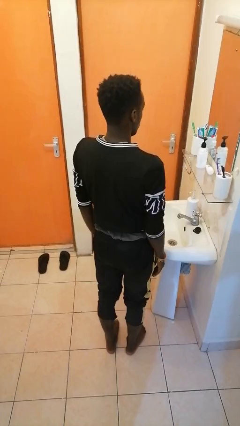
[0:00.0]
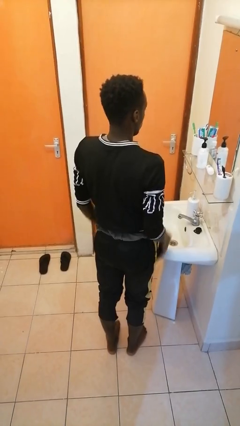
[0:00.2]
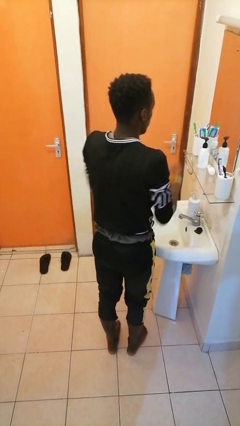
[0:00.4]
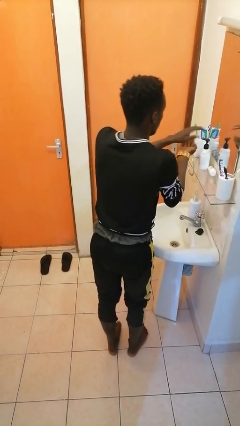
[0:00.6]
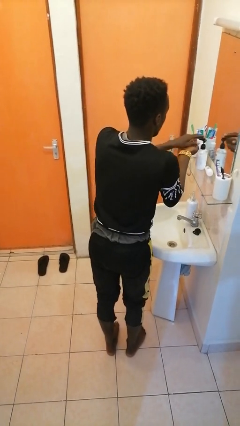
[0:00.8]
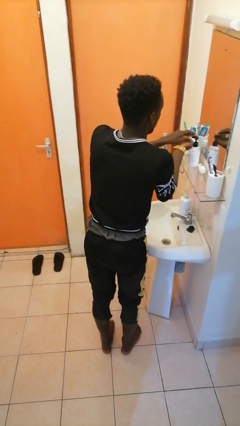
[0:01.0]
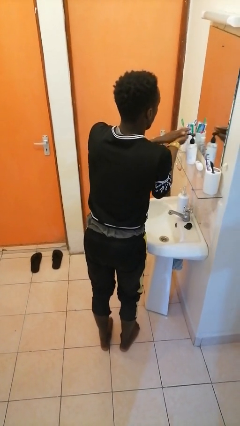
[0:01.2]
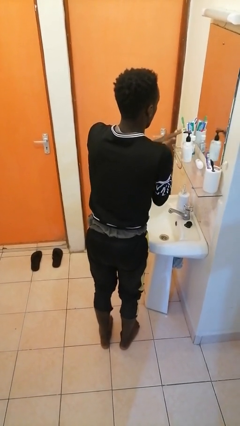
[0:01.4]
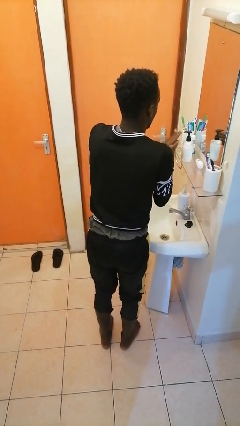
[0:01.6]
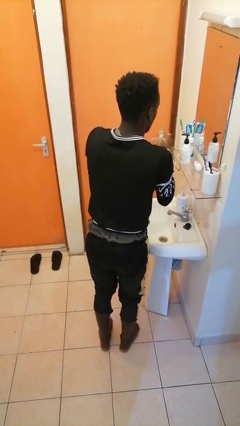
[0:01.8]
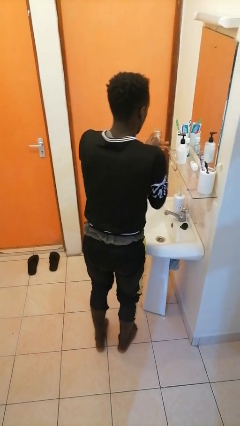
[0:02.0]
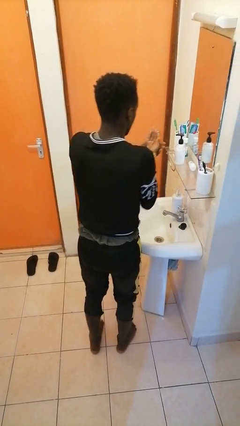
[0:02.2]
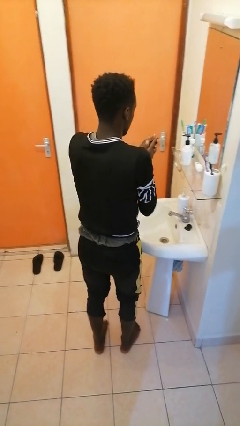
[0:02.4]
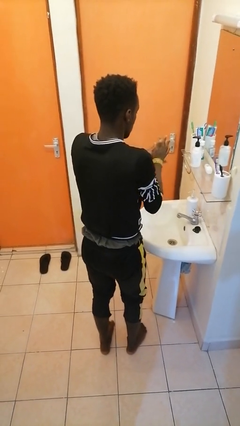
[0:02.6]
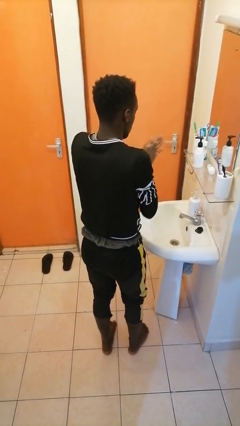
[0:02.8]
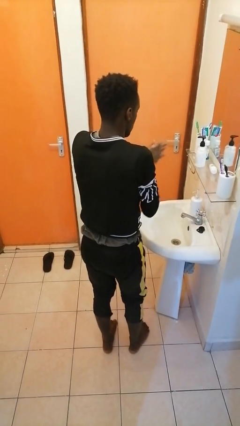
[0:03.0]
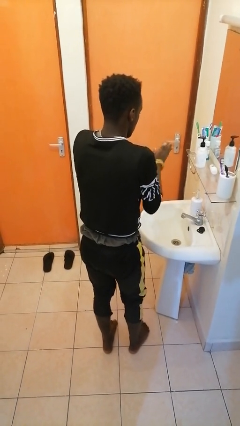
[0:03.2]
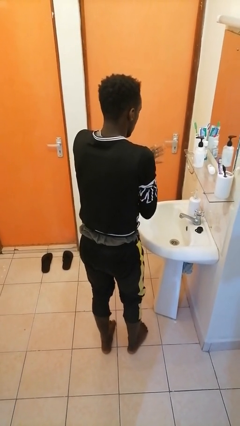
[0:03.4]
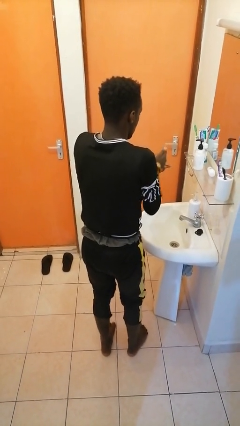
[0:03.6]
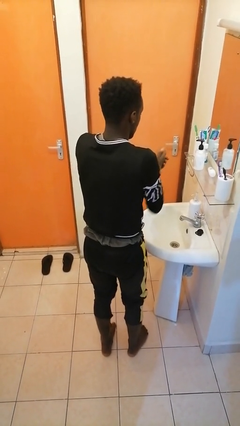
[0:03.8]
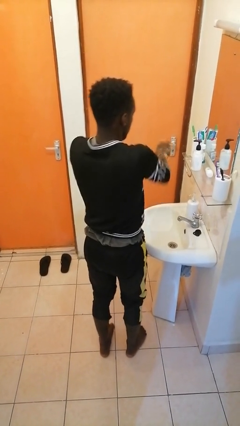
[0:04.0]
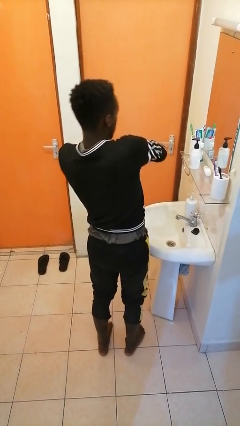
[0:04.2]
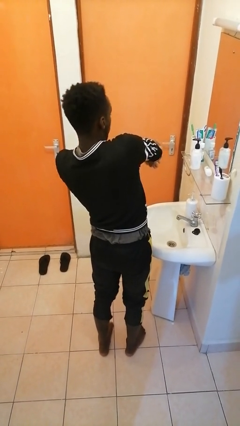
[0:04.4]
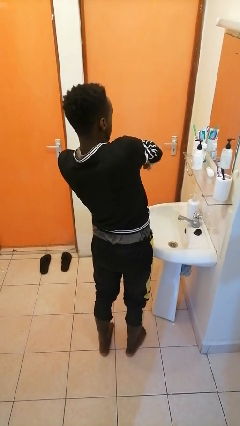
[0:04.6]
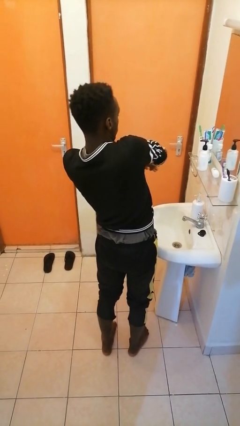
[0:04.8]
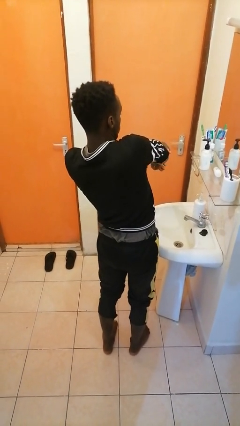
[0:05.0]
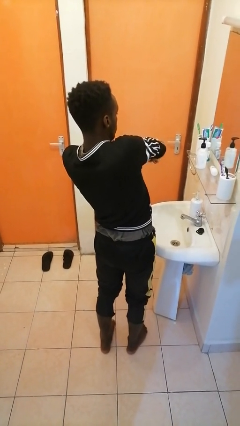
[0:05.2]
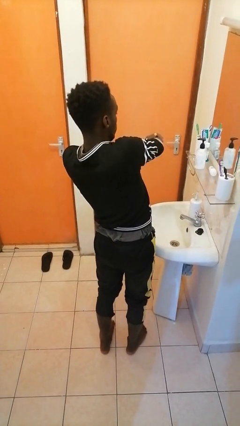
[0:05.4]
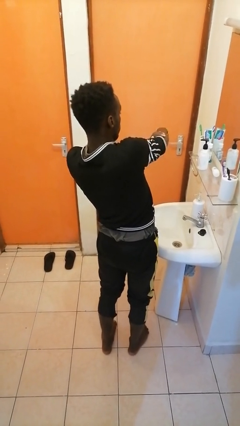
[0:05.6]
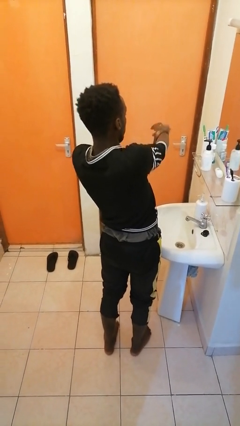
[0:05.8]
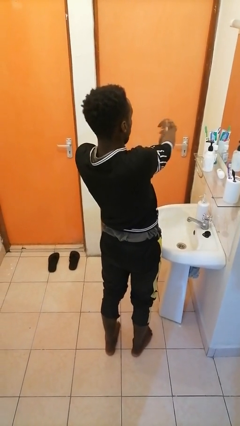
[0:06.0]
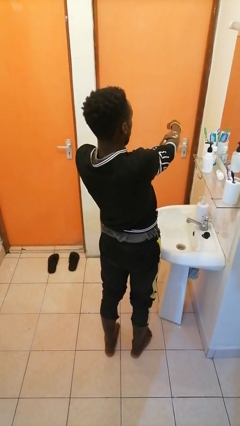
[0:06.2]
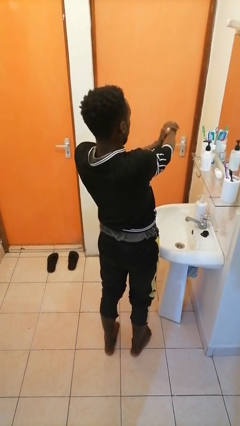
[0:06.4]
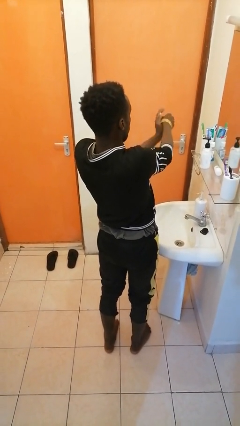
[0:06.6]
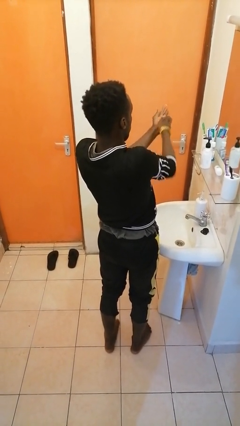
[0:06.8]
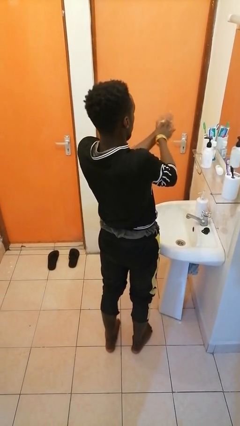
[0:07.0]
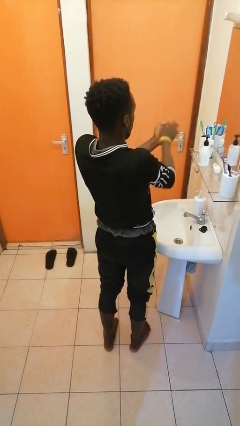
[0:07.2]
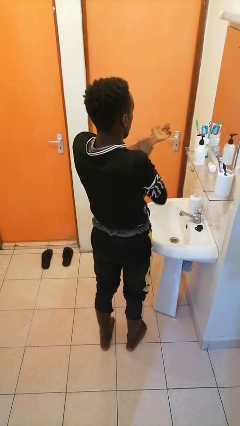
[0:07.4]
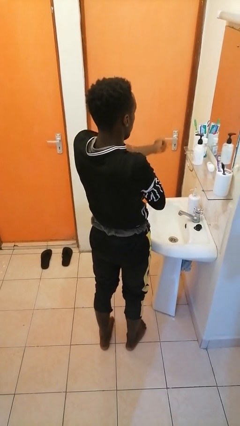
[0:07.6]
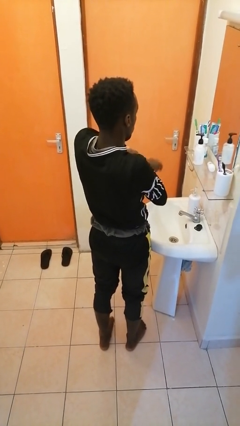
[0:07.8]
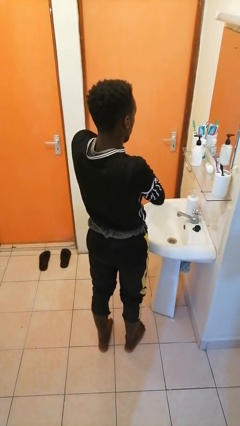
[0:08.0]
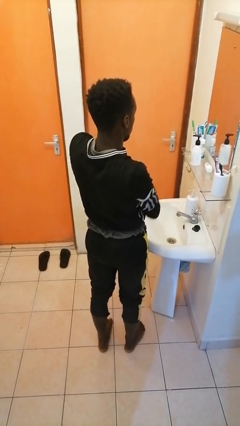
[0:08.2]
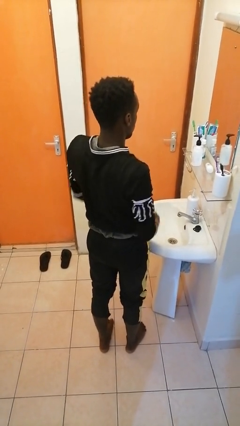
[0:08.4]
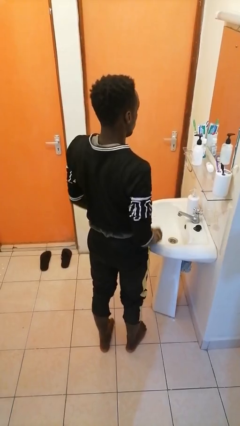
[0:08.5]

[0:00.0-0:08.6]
person applies facial moisturizer

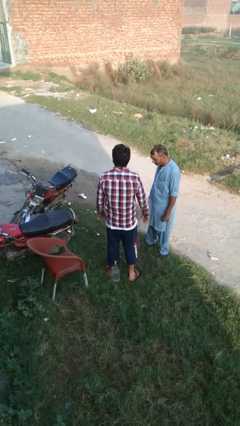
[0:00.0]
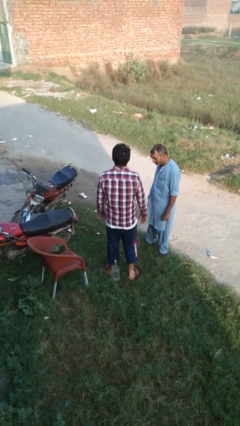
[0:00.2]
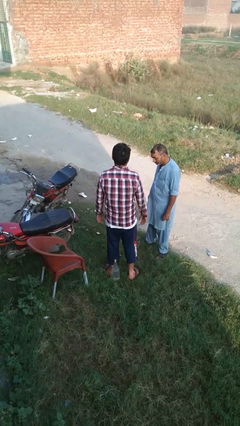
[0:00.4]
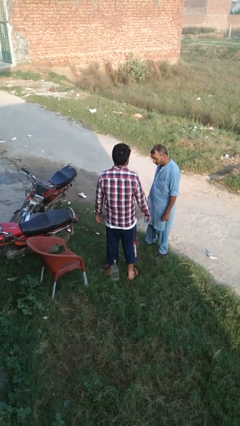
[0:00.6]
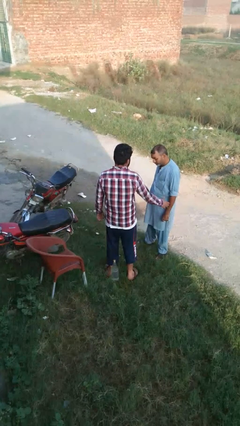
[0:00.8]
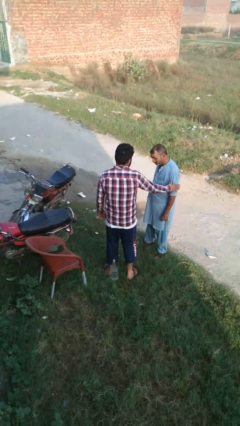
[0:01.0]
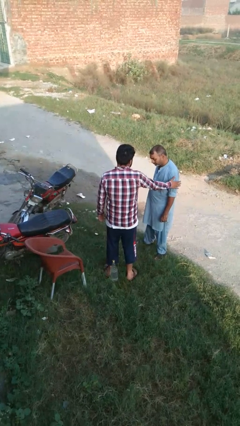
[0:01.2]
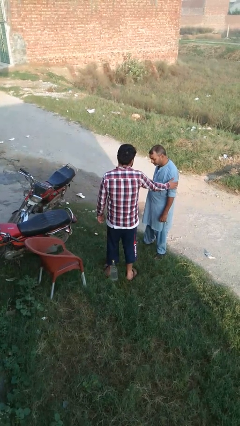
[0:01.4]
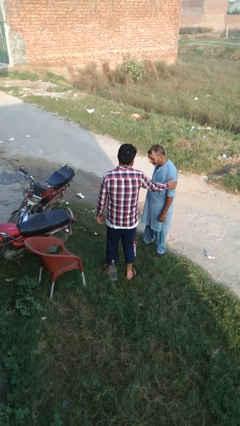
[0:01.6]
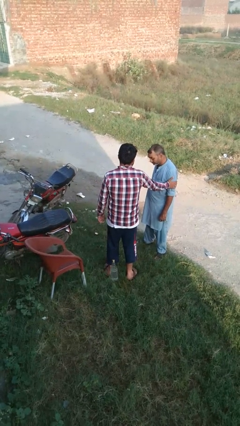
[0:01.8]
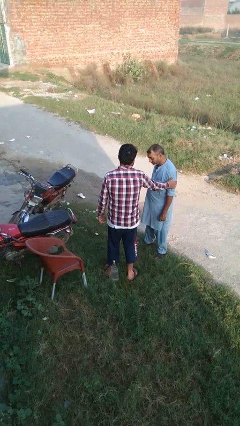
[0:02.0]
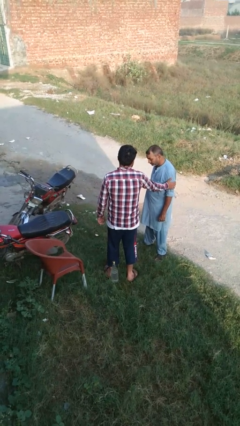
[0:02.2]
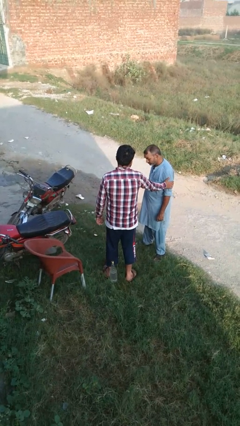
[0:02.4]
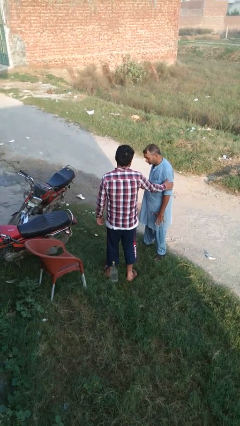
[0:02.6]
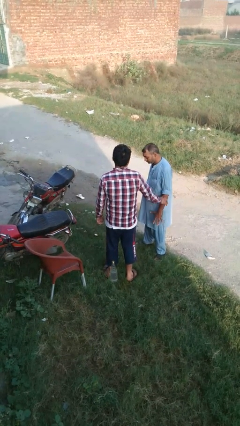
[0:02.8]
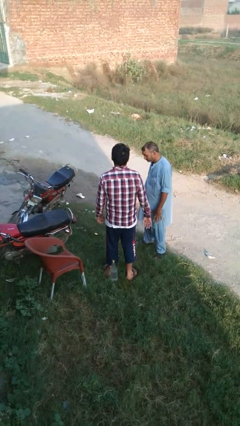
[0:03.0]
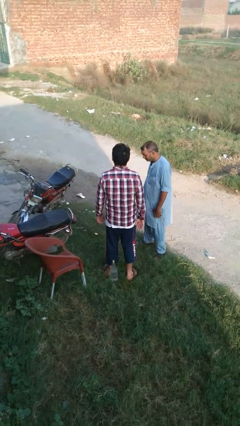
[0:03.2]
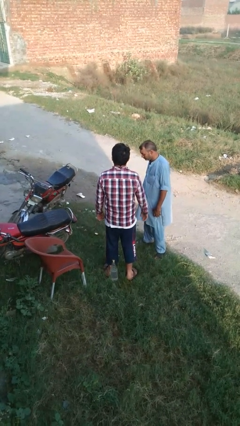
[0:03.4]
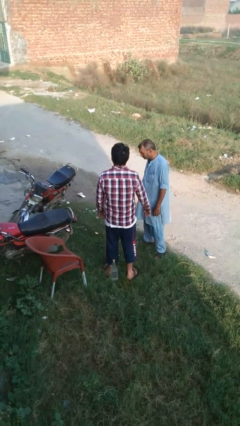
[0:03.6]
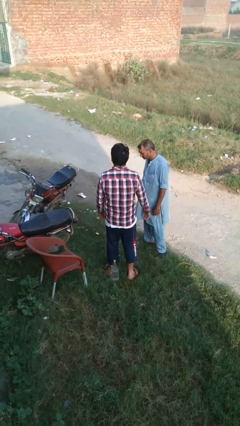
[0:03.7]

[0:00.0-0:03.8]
person grabs person by bicep

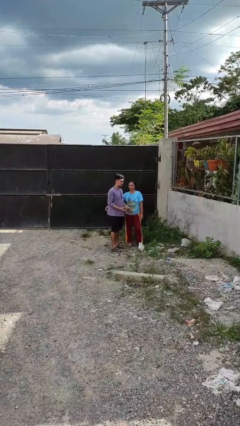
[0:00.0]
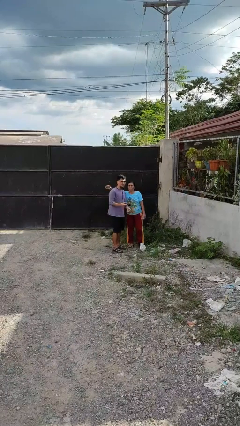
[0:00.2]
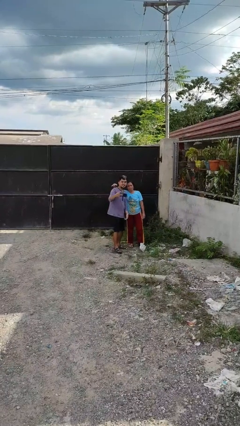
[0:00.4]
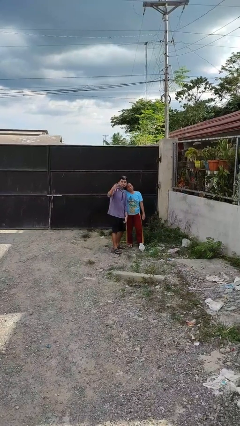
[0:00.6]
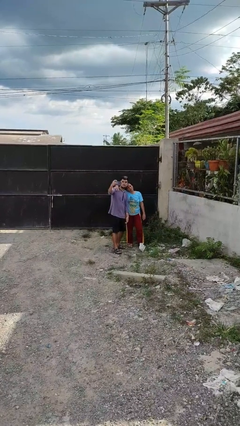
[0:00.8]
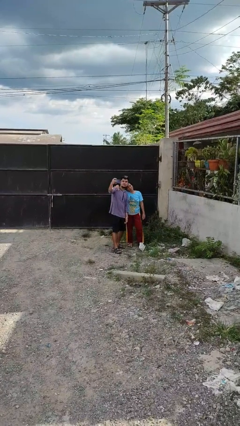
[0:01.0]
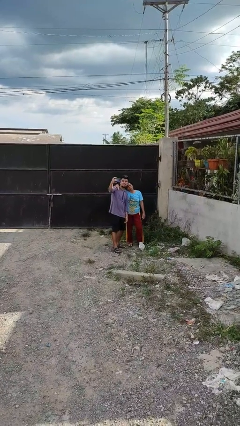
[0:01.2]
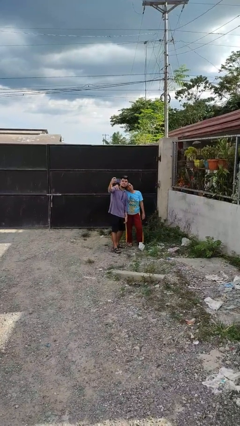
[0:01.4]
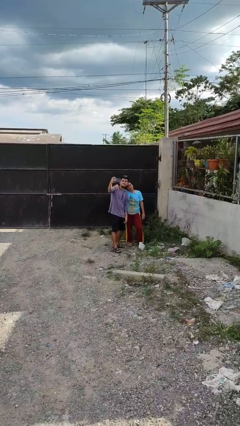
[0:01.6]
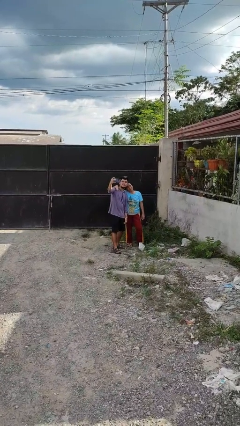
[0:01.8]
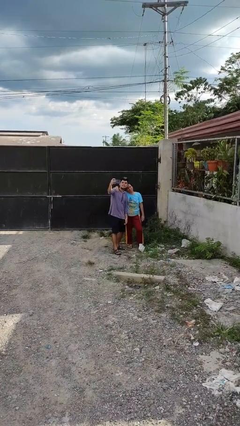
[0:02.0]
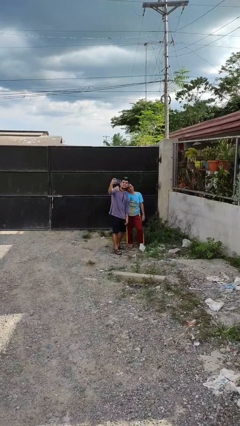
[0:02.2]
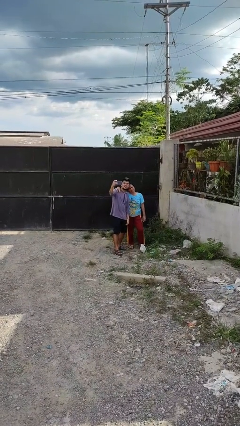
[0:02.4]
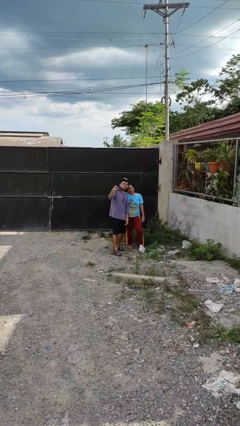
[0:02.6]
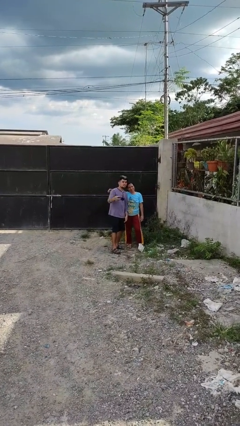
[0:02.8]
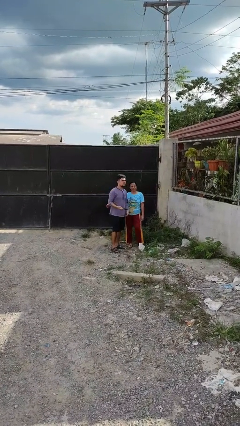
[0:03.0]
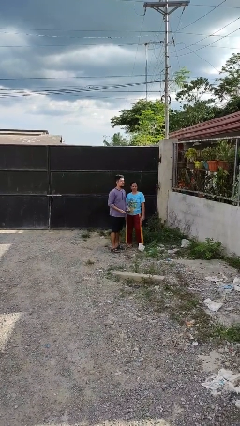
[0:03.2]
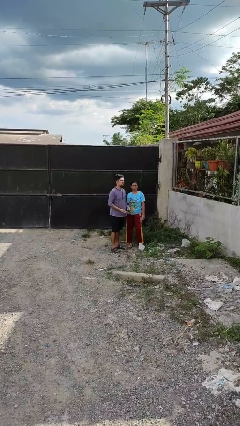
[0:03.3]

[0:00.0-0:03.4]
person takes selfie with person

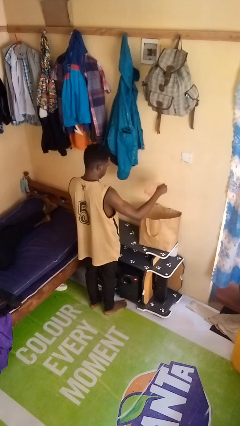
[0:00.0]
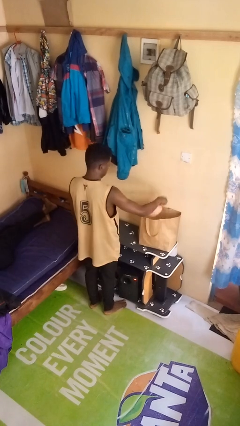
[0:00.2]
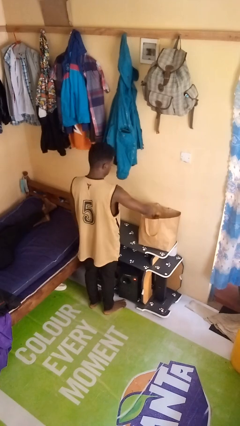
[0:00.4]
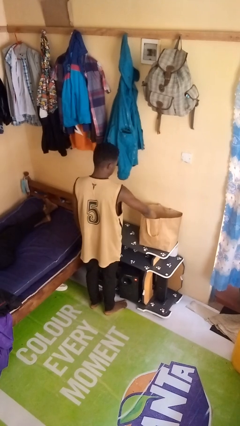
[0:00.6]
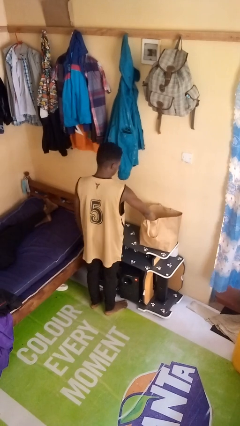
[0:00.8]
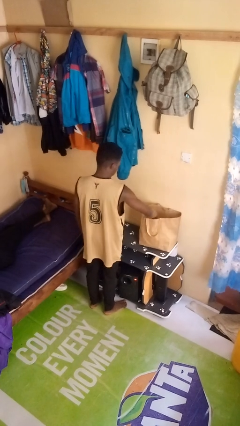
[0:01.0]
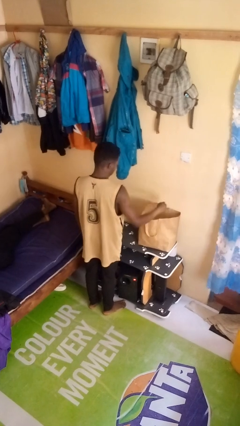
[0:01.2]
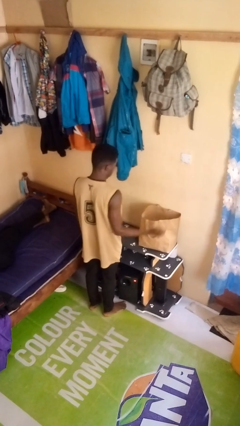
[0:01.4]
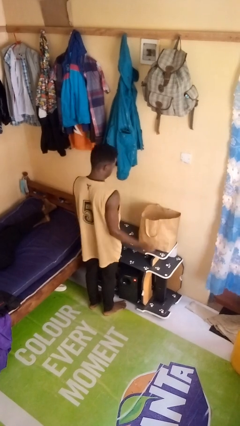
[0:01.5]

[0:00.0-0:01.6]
person puts object into bag

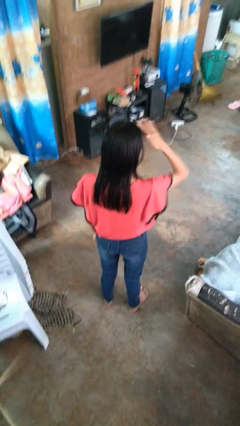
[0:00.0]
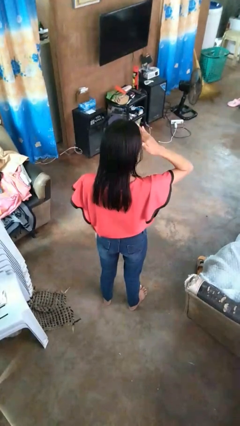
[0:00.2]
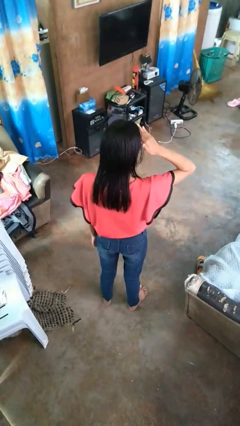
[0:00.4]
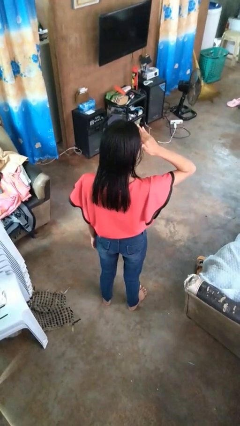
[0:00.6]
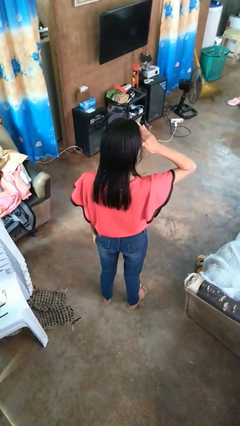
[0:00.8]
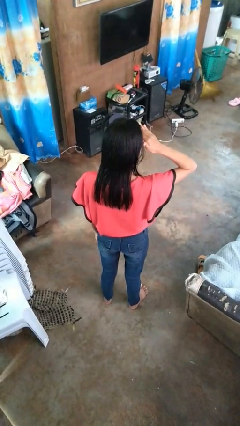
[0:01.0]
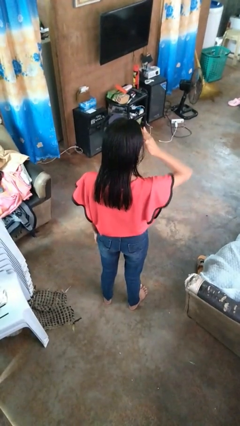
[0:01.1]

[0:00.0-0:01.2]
person salutes
